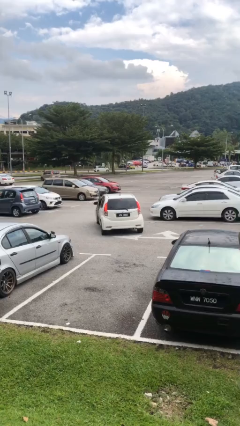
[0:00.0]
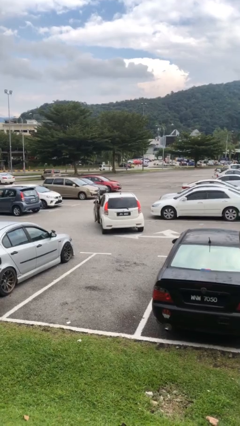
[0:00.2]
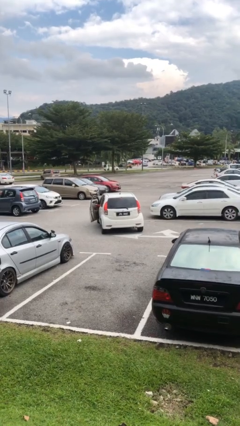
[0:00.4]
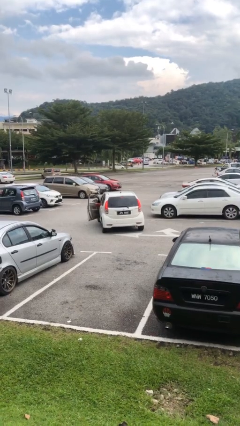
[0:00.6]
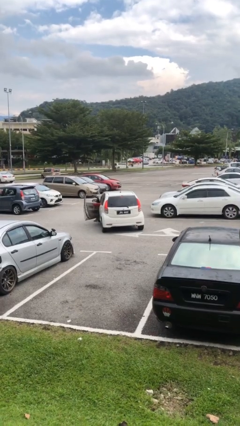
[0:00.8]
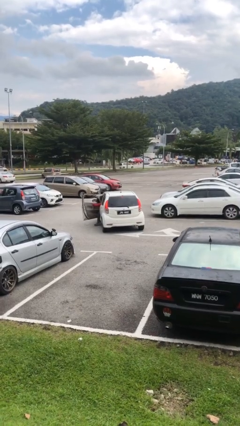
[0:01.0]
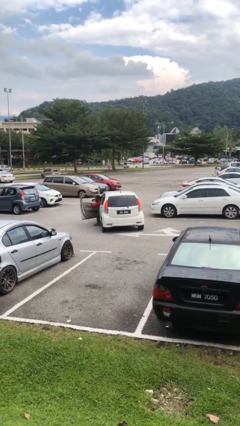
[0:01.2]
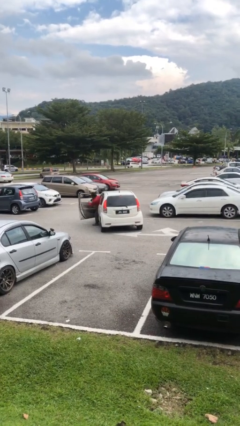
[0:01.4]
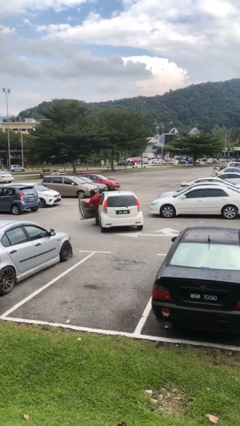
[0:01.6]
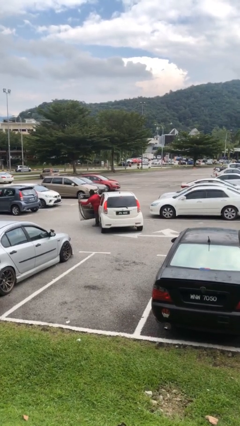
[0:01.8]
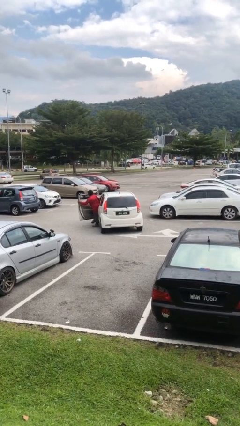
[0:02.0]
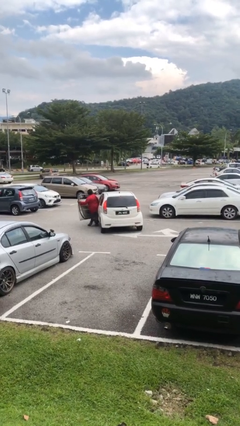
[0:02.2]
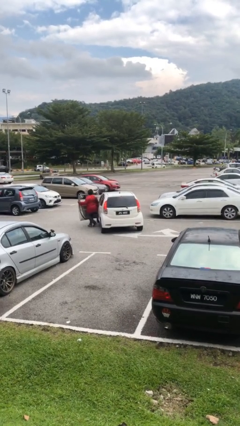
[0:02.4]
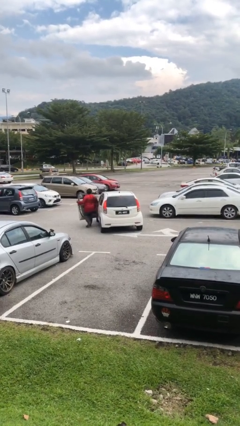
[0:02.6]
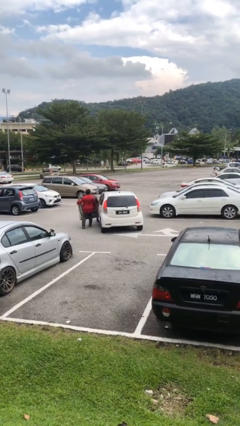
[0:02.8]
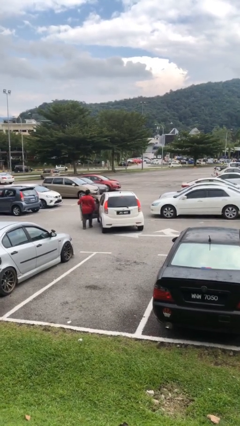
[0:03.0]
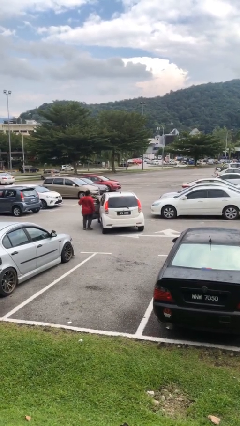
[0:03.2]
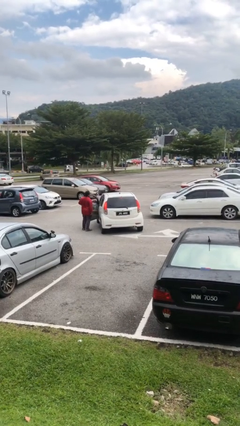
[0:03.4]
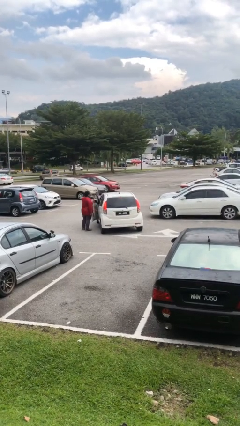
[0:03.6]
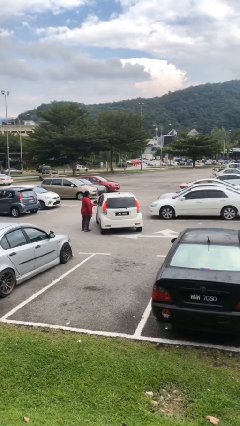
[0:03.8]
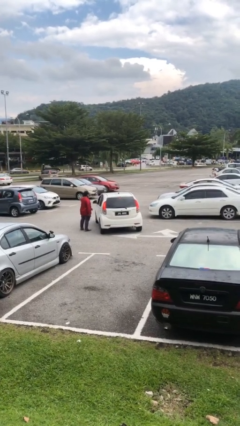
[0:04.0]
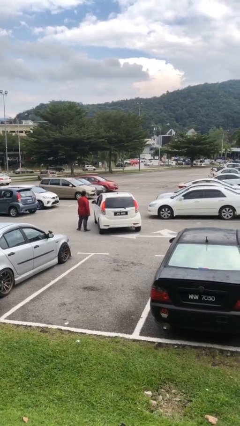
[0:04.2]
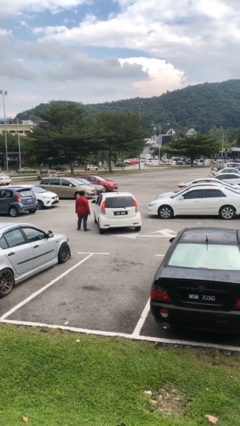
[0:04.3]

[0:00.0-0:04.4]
car drops off person

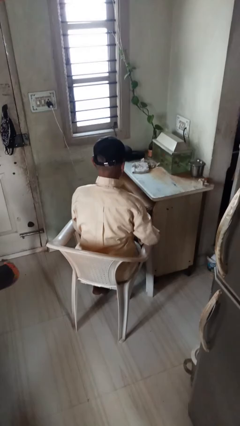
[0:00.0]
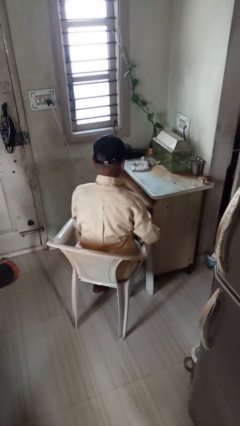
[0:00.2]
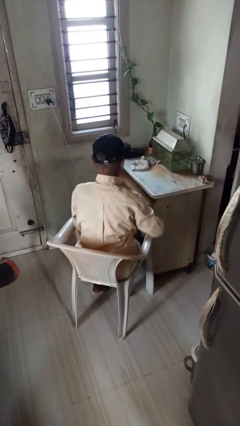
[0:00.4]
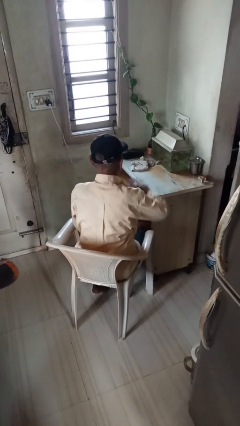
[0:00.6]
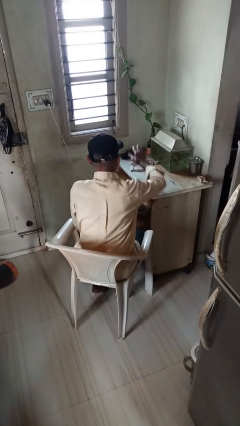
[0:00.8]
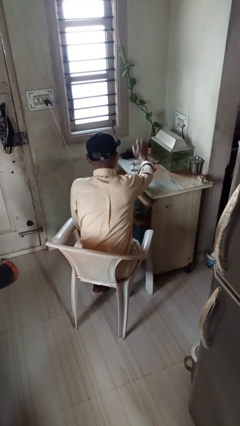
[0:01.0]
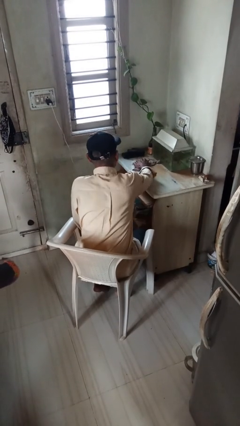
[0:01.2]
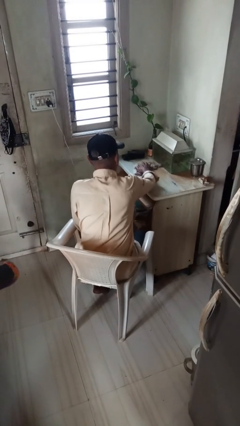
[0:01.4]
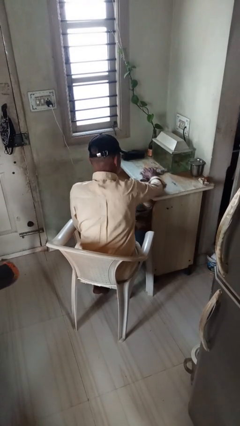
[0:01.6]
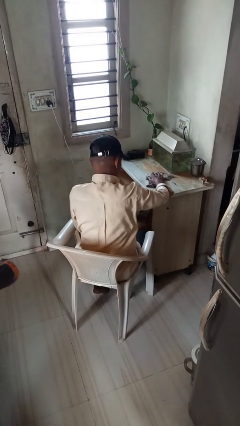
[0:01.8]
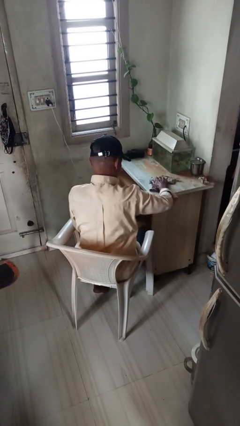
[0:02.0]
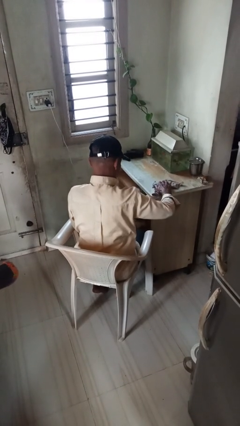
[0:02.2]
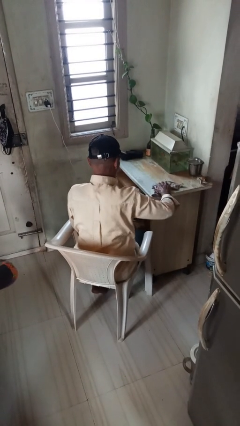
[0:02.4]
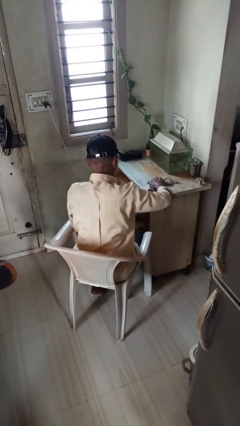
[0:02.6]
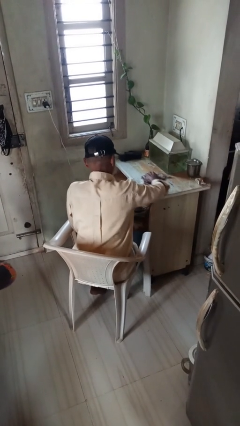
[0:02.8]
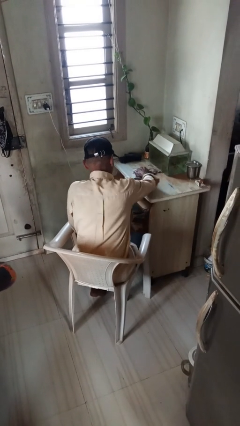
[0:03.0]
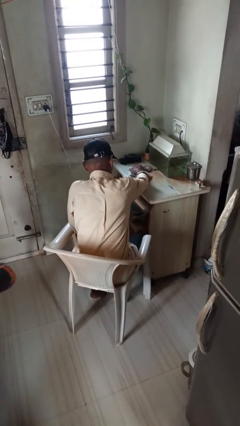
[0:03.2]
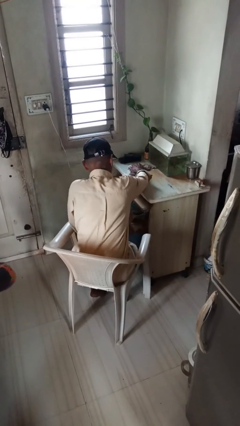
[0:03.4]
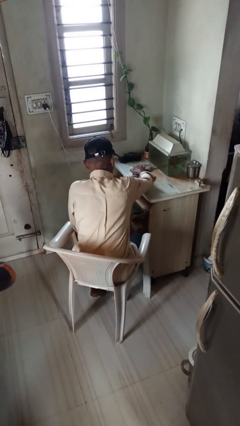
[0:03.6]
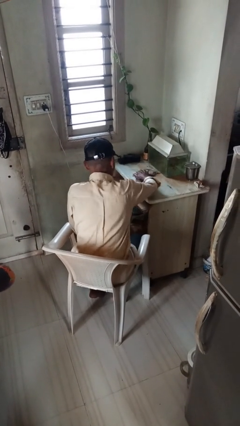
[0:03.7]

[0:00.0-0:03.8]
person cleans table with rag

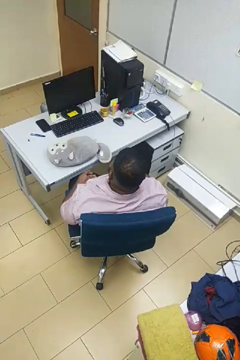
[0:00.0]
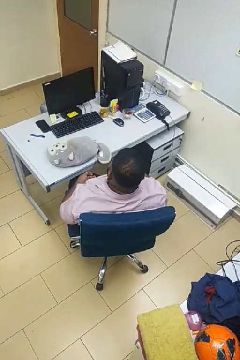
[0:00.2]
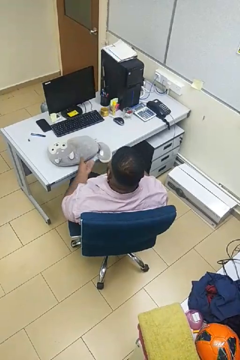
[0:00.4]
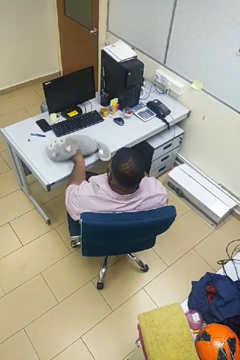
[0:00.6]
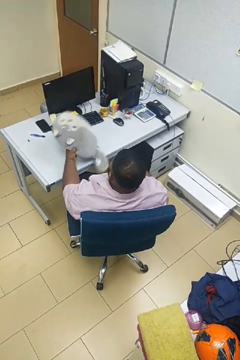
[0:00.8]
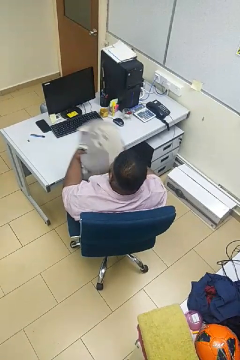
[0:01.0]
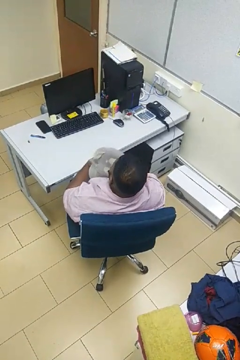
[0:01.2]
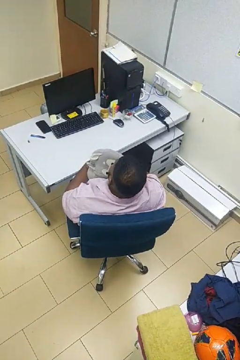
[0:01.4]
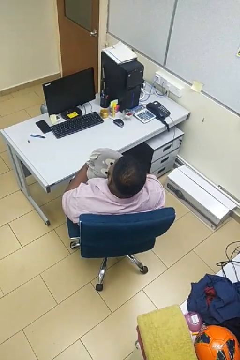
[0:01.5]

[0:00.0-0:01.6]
person hugs stuffed animal

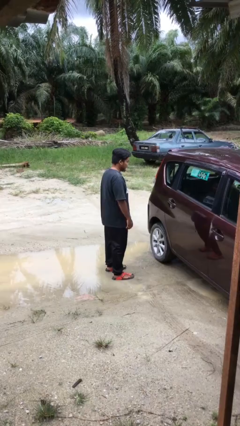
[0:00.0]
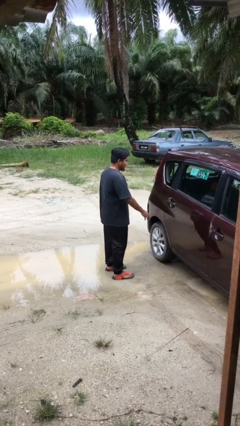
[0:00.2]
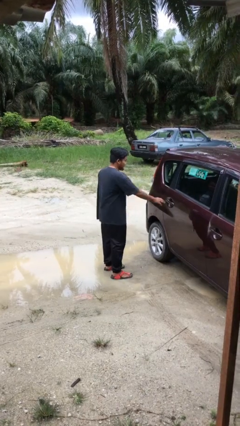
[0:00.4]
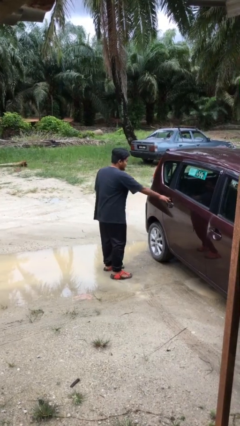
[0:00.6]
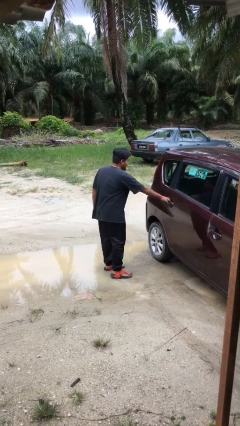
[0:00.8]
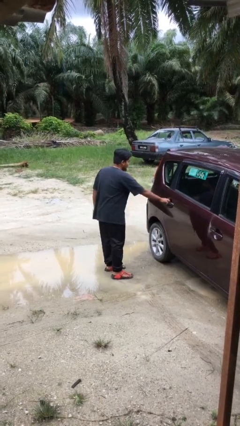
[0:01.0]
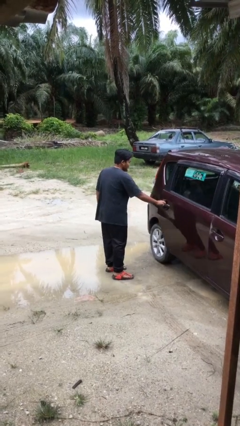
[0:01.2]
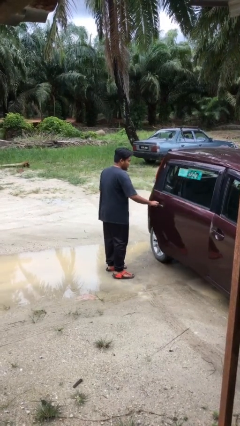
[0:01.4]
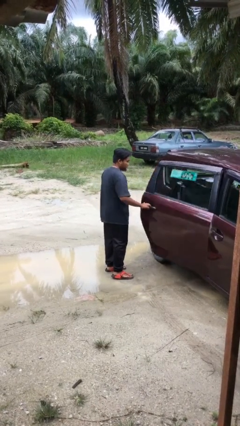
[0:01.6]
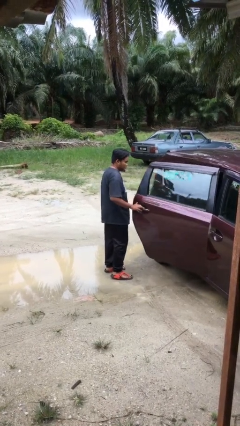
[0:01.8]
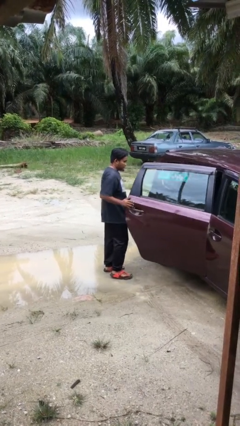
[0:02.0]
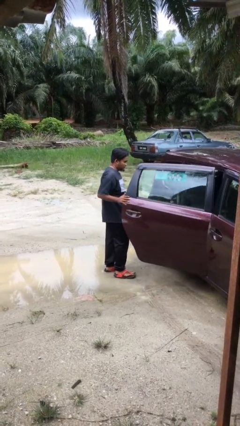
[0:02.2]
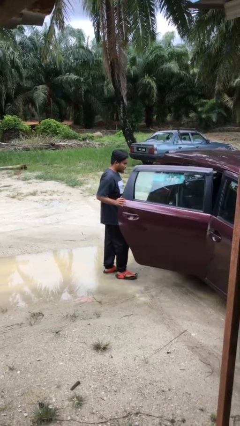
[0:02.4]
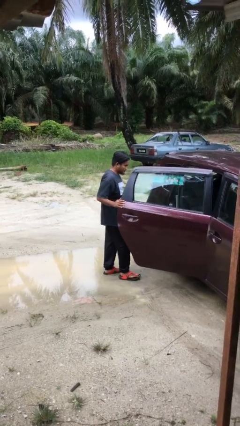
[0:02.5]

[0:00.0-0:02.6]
person opens car door

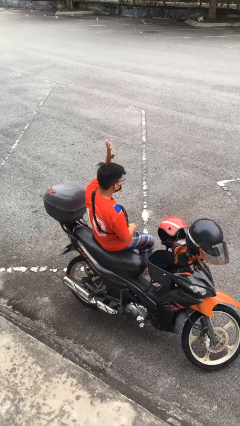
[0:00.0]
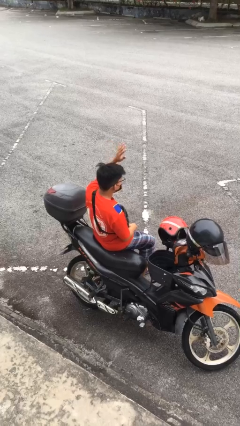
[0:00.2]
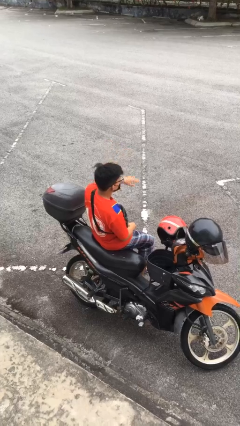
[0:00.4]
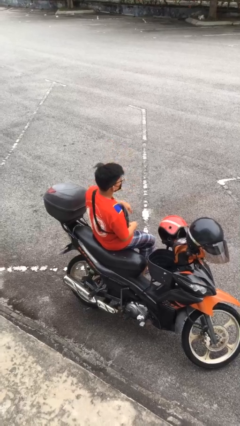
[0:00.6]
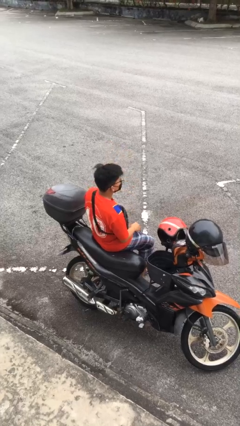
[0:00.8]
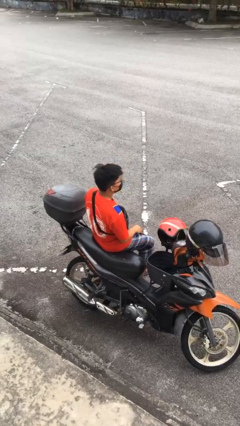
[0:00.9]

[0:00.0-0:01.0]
person gestures lower hand

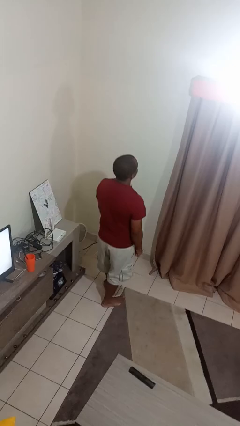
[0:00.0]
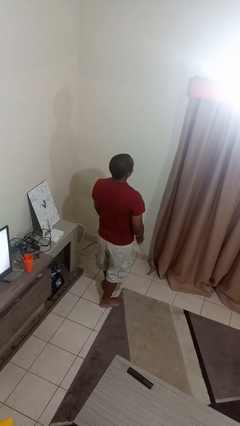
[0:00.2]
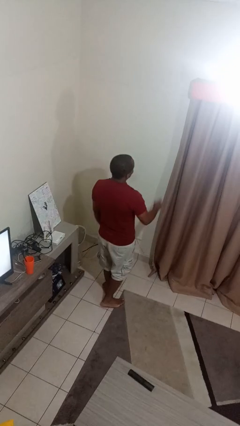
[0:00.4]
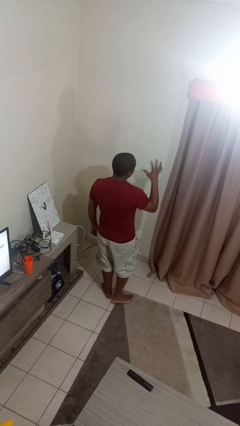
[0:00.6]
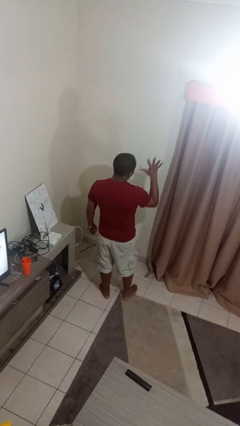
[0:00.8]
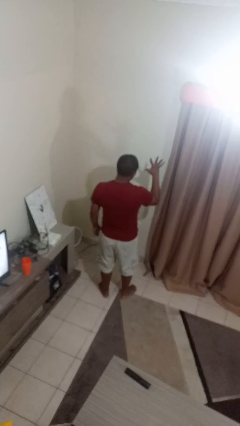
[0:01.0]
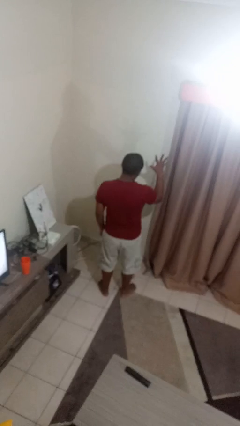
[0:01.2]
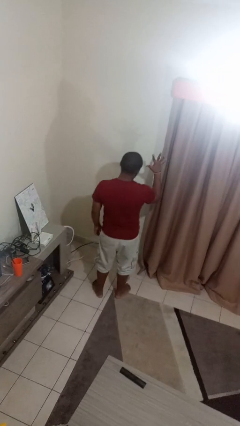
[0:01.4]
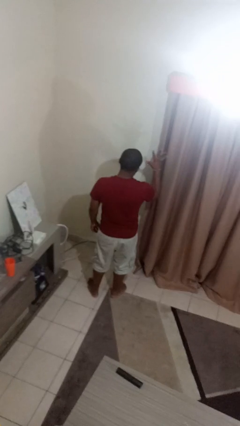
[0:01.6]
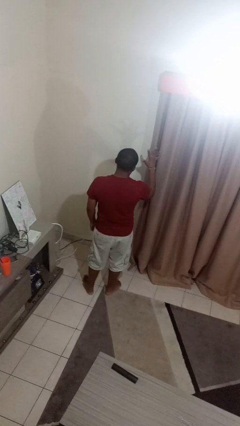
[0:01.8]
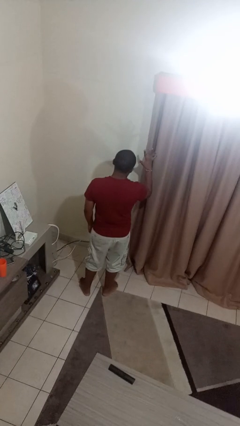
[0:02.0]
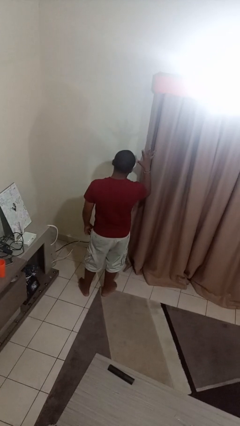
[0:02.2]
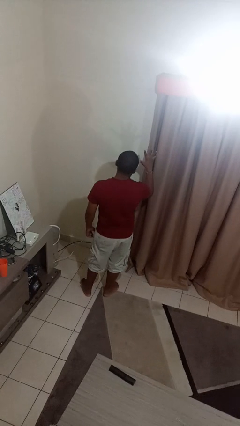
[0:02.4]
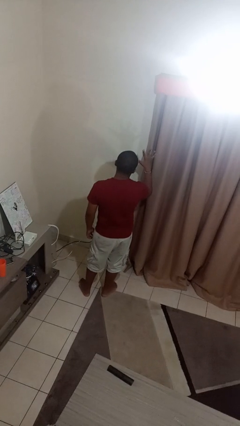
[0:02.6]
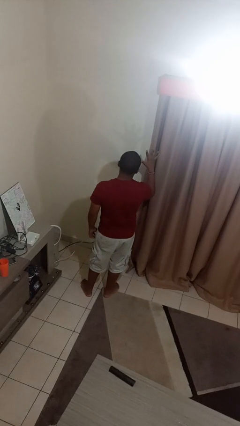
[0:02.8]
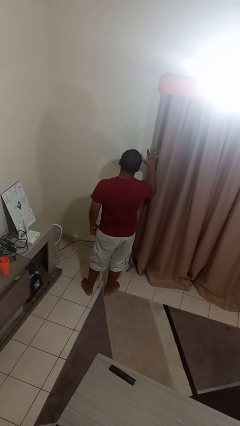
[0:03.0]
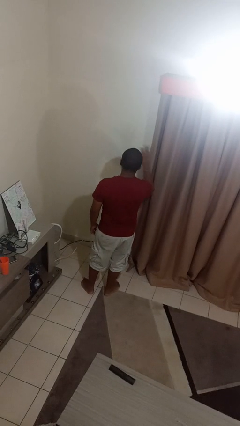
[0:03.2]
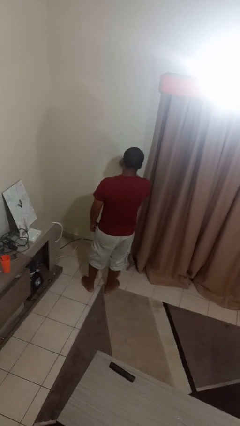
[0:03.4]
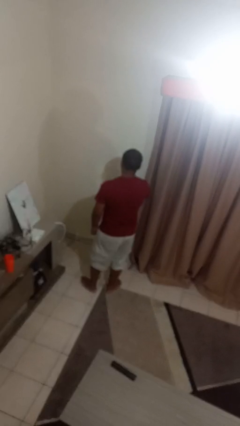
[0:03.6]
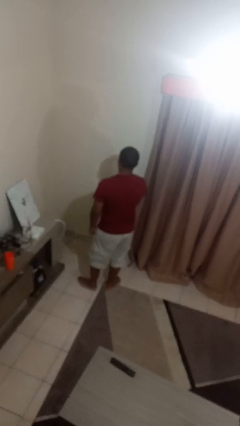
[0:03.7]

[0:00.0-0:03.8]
person gestures number five

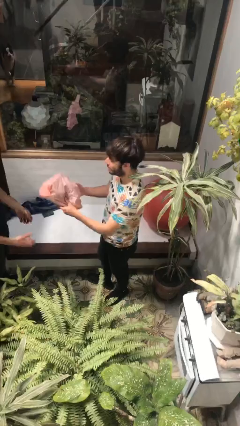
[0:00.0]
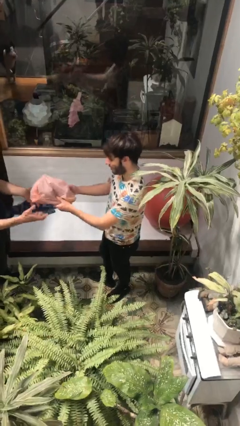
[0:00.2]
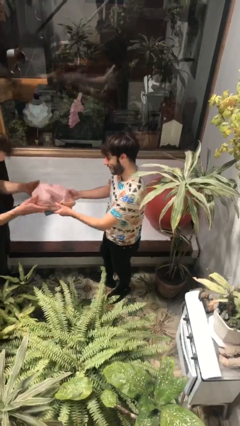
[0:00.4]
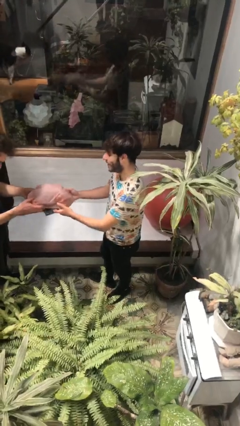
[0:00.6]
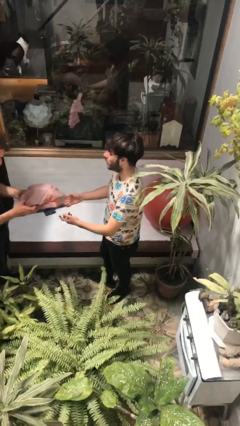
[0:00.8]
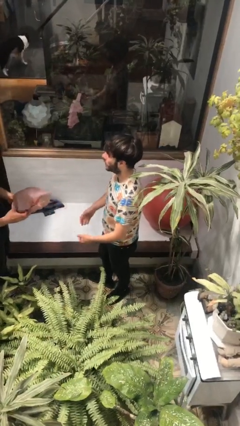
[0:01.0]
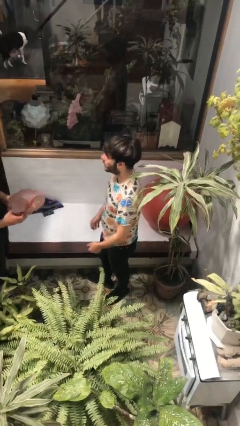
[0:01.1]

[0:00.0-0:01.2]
person transfers object to person
